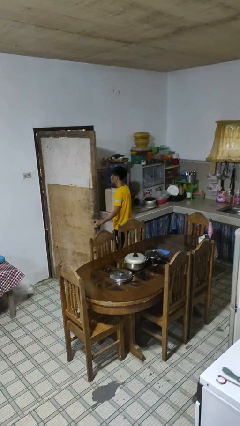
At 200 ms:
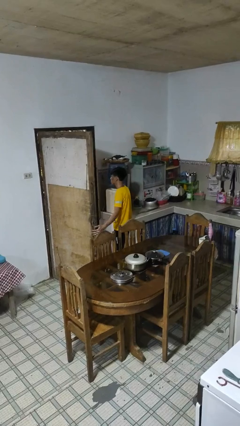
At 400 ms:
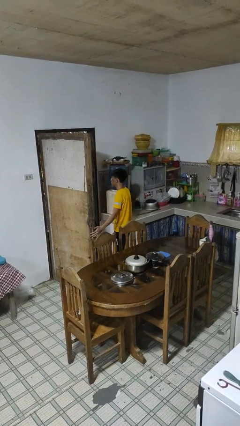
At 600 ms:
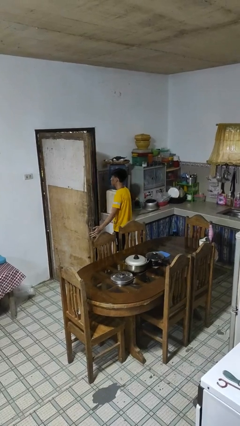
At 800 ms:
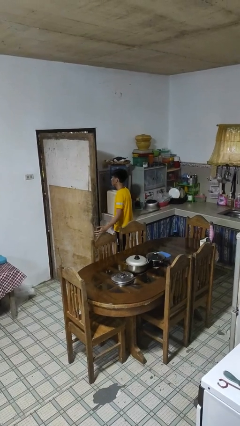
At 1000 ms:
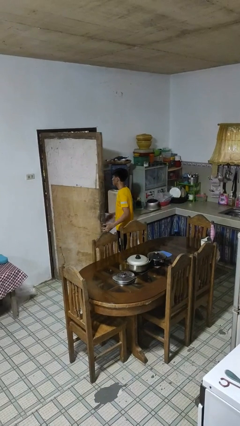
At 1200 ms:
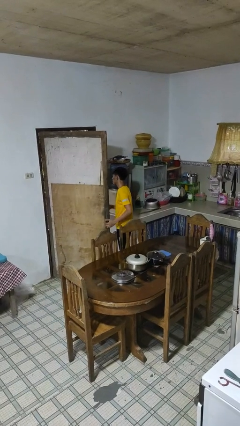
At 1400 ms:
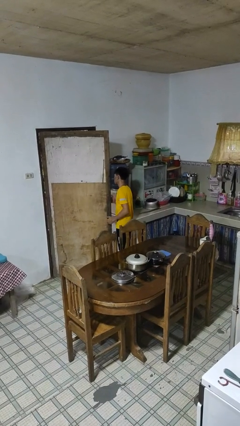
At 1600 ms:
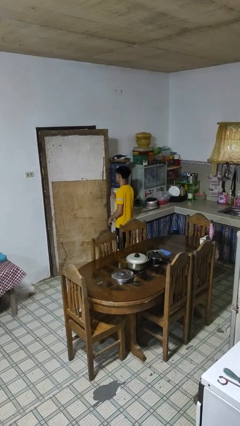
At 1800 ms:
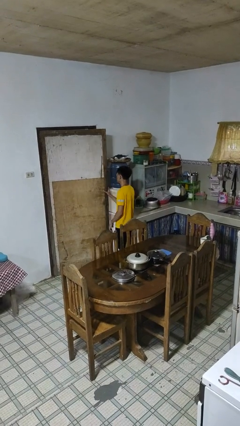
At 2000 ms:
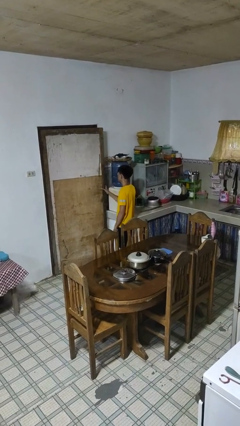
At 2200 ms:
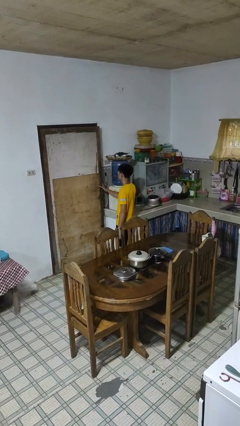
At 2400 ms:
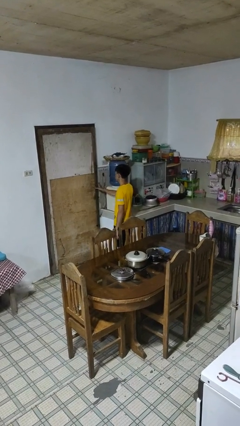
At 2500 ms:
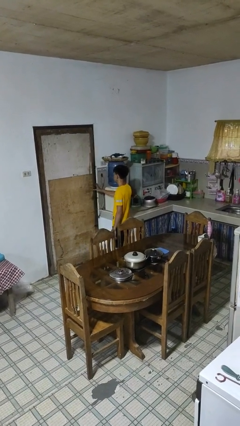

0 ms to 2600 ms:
person closes facility door

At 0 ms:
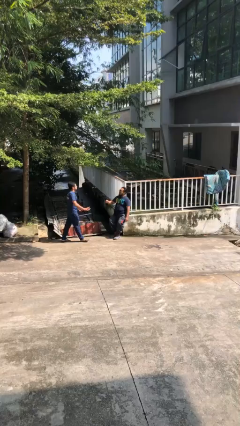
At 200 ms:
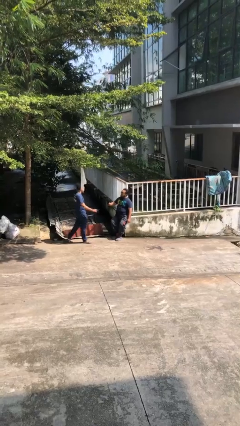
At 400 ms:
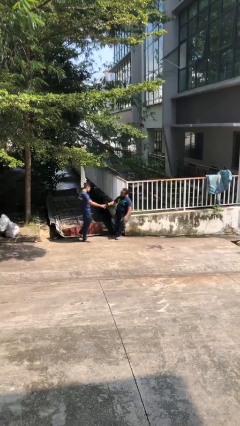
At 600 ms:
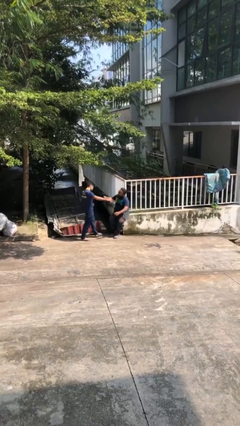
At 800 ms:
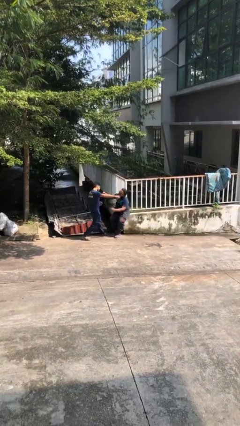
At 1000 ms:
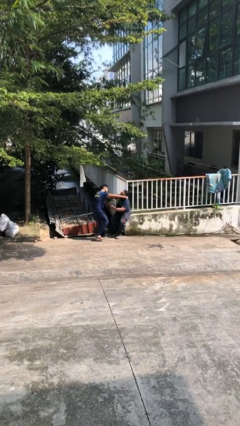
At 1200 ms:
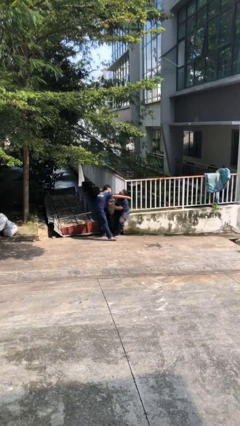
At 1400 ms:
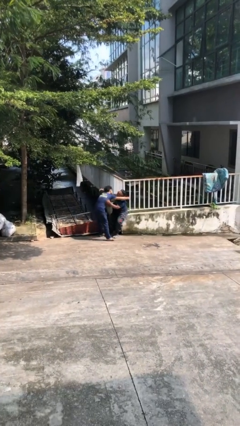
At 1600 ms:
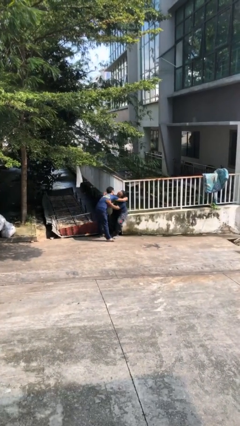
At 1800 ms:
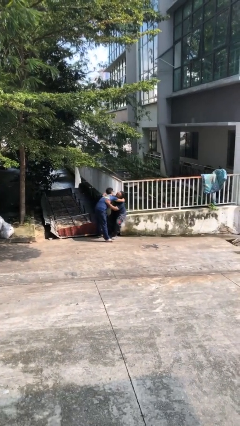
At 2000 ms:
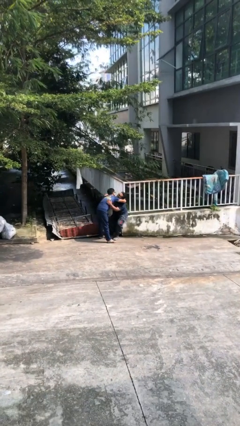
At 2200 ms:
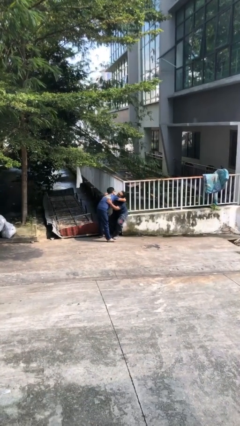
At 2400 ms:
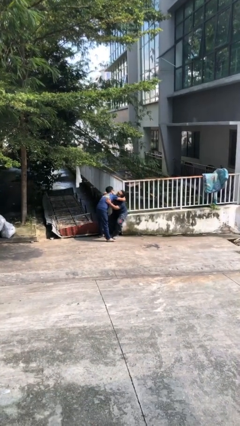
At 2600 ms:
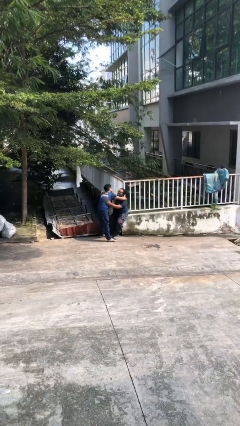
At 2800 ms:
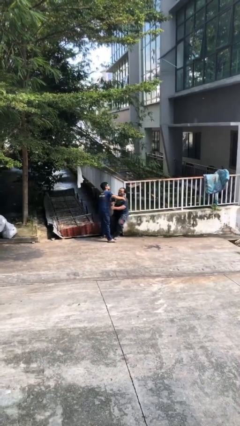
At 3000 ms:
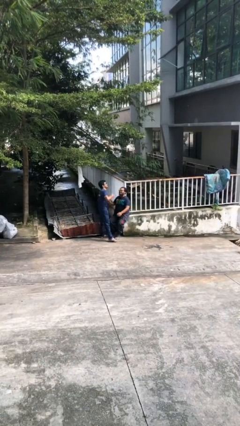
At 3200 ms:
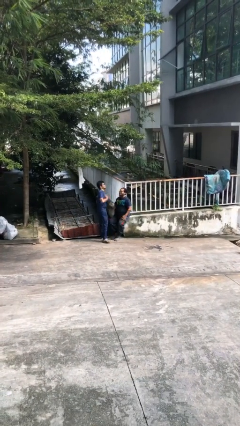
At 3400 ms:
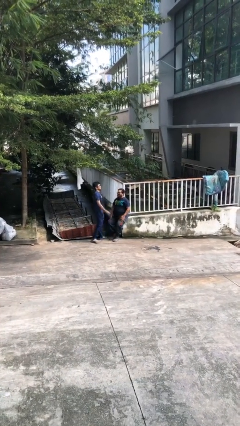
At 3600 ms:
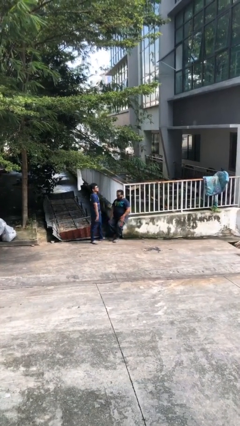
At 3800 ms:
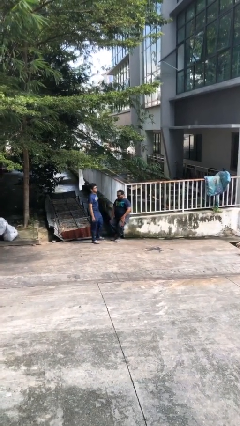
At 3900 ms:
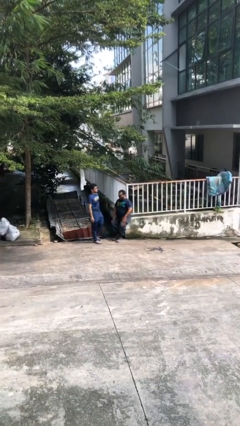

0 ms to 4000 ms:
person embraces person

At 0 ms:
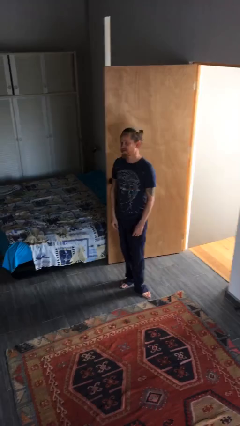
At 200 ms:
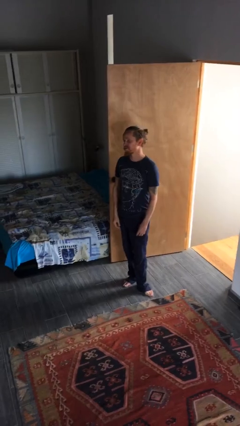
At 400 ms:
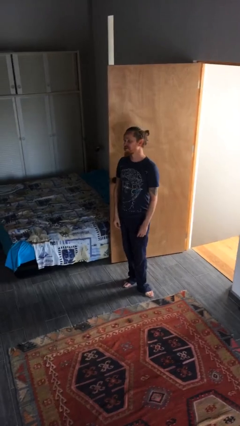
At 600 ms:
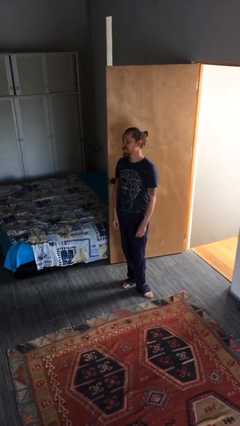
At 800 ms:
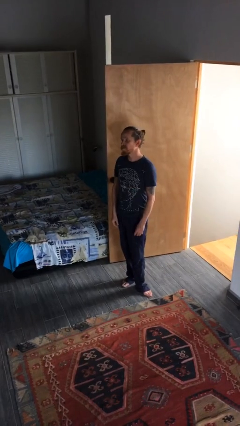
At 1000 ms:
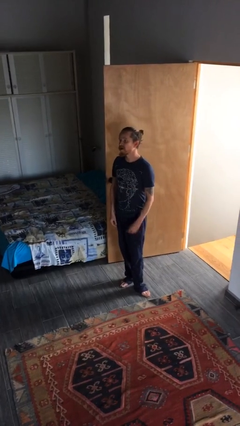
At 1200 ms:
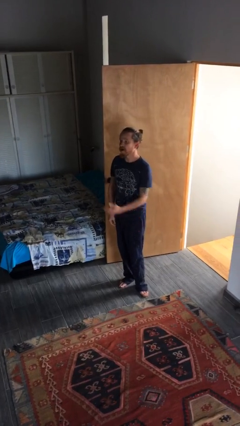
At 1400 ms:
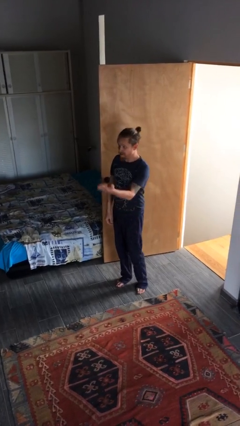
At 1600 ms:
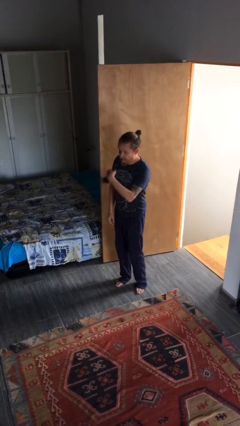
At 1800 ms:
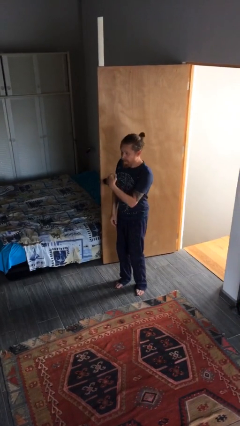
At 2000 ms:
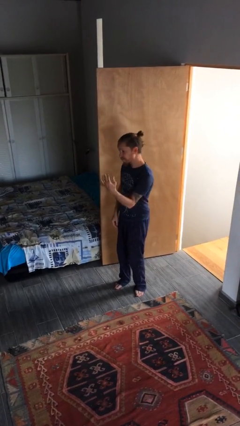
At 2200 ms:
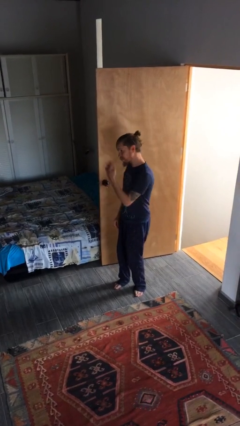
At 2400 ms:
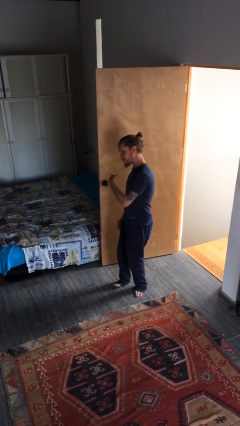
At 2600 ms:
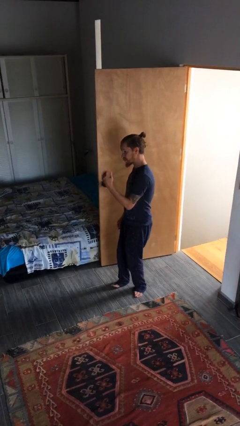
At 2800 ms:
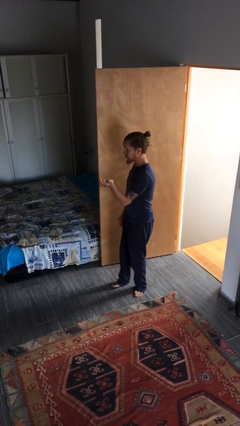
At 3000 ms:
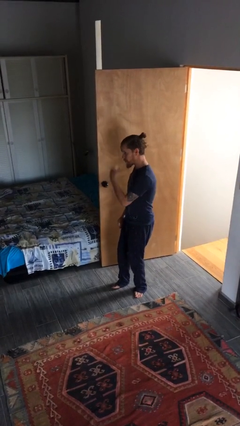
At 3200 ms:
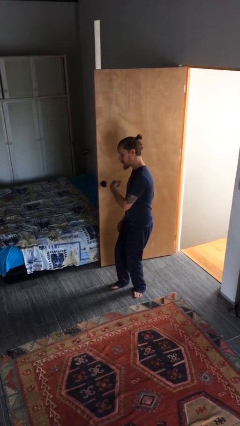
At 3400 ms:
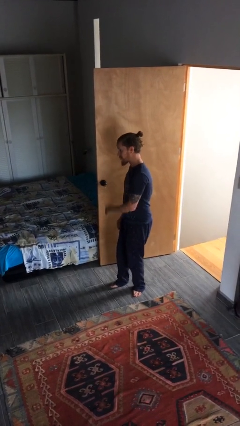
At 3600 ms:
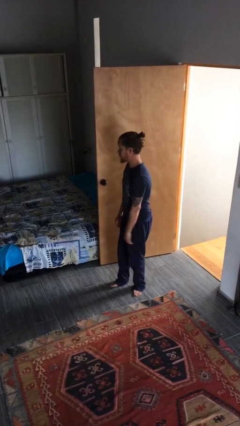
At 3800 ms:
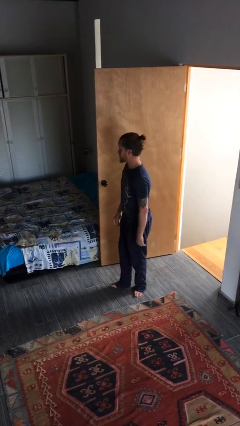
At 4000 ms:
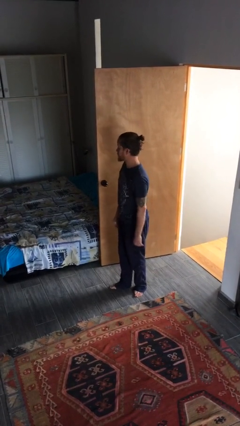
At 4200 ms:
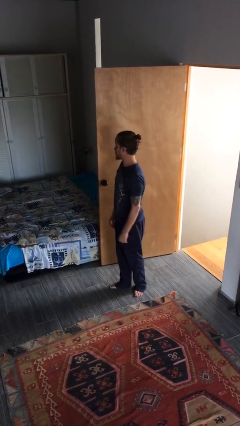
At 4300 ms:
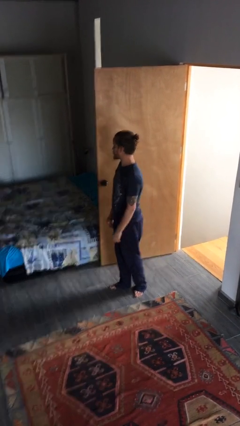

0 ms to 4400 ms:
person gestures come here

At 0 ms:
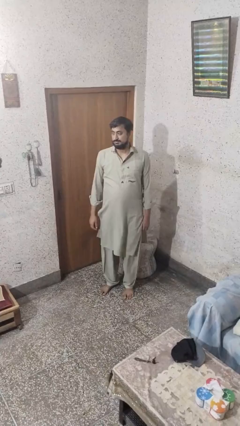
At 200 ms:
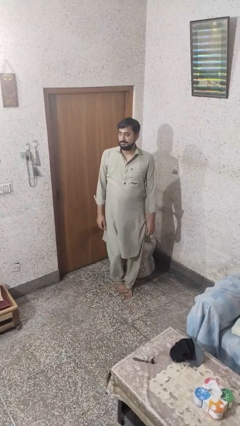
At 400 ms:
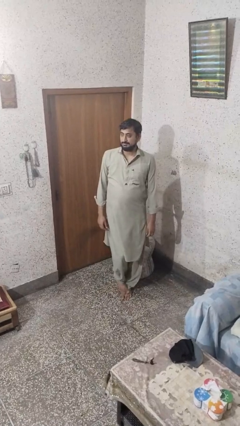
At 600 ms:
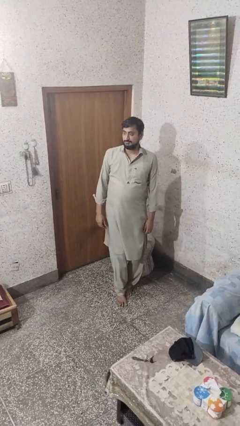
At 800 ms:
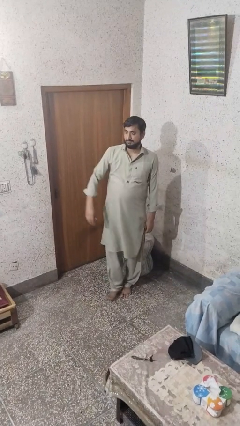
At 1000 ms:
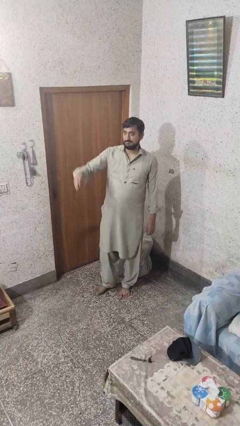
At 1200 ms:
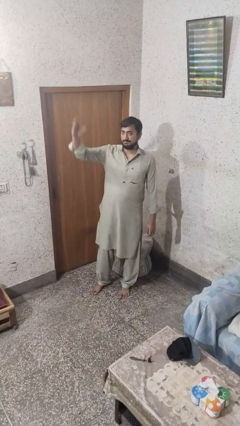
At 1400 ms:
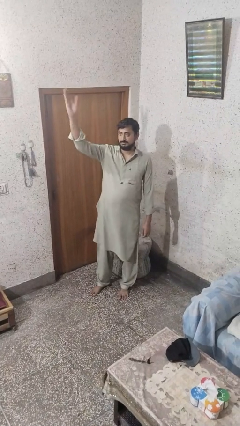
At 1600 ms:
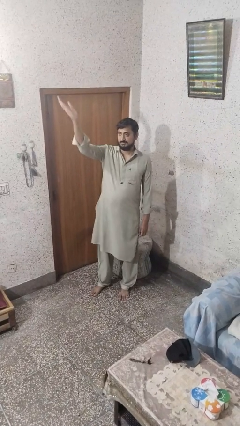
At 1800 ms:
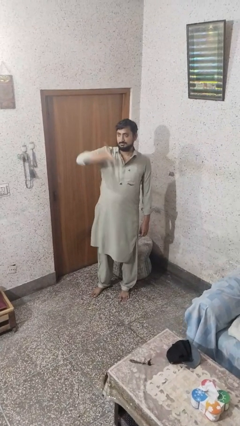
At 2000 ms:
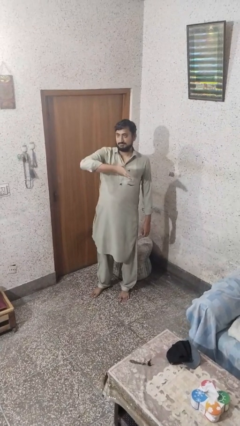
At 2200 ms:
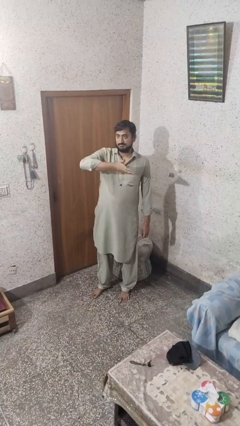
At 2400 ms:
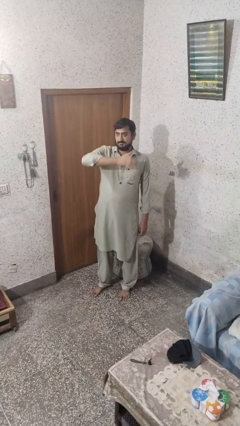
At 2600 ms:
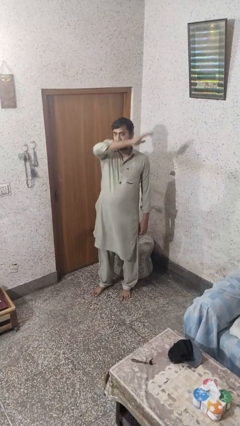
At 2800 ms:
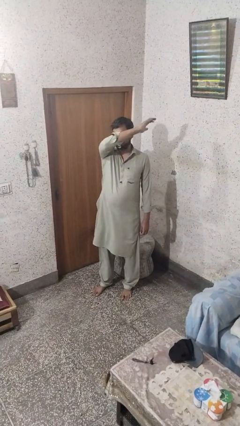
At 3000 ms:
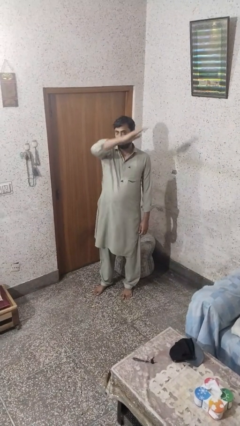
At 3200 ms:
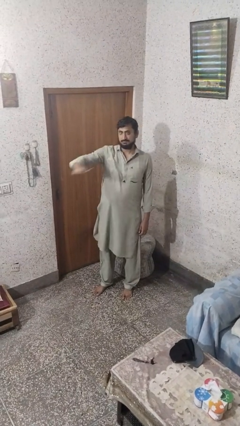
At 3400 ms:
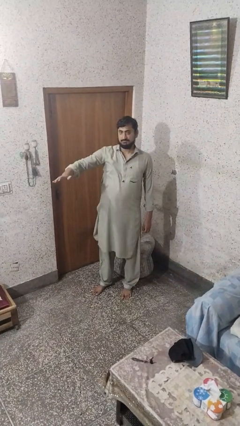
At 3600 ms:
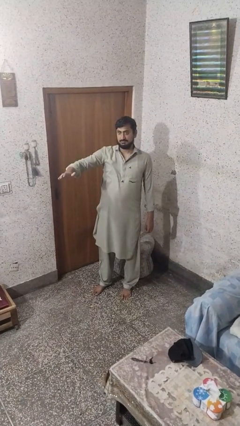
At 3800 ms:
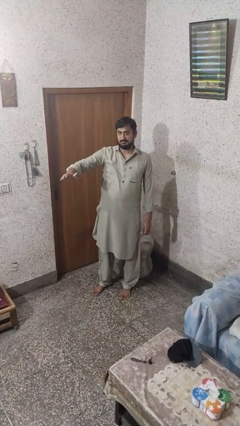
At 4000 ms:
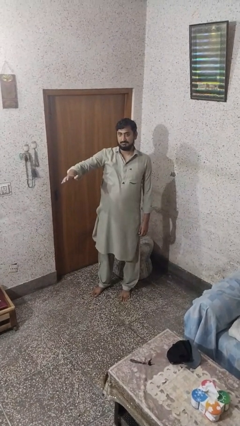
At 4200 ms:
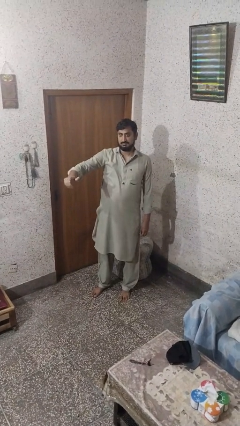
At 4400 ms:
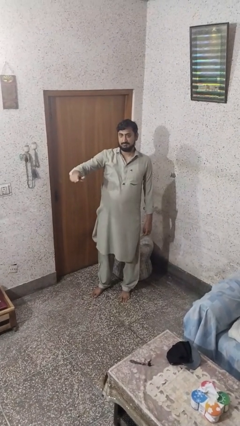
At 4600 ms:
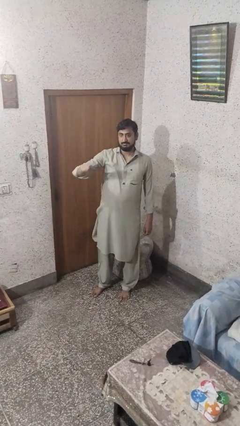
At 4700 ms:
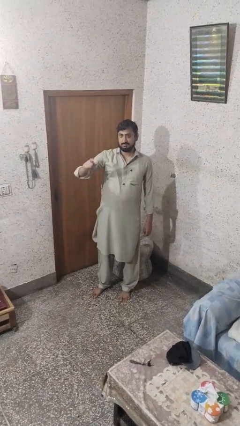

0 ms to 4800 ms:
person gestures cut

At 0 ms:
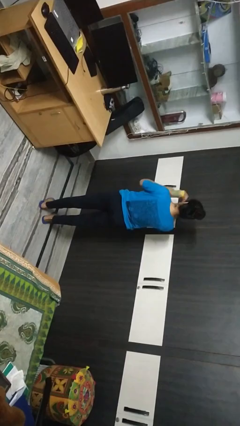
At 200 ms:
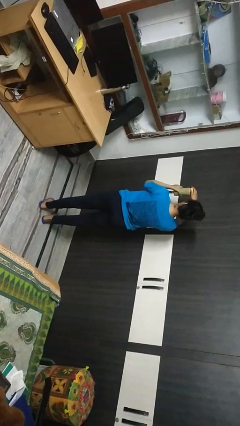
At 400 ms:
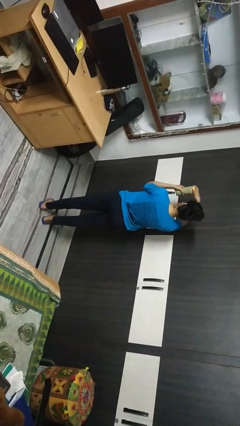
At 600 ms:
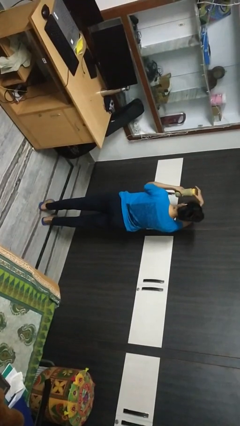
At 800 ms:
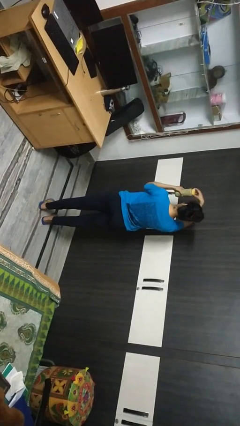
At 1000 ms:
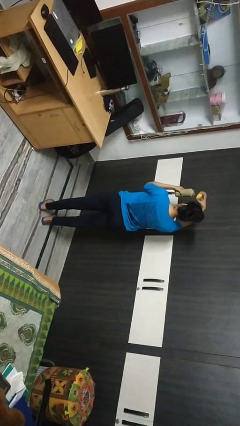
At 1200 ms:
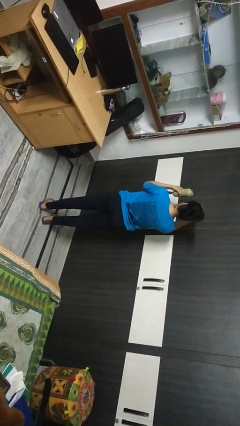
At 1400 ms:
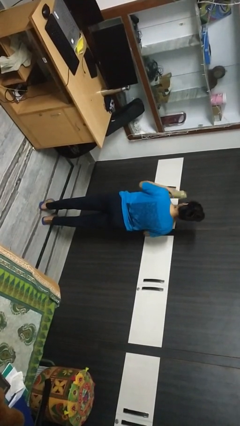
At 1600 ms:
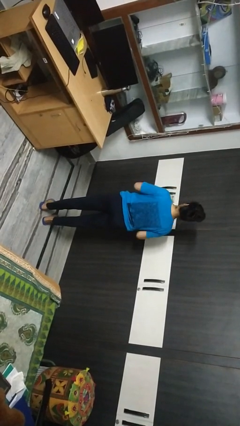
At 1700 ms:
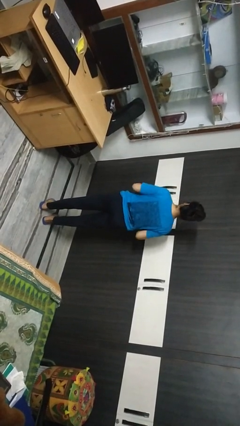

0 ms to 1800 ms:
person opens jar
